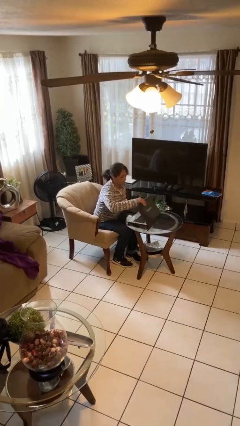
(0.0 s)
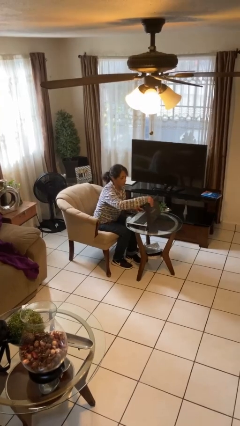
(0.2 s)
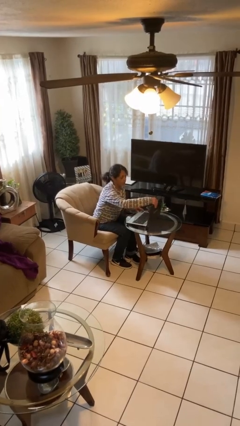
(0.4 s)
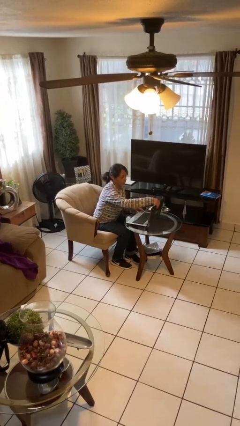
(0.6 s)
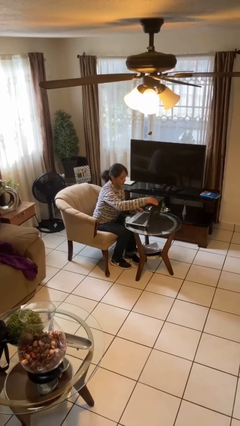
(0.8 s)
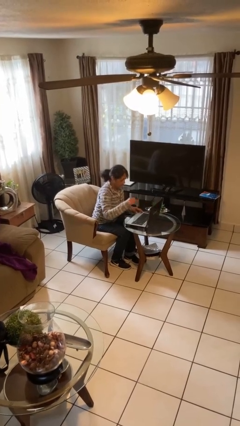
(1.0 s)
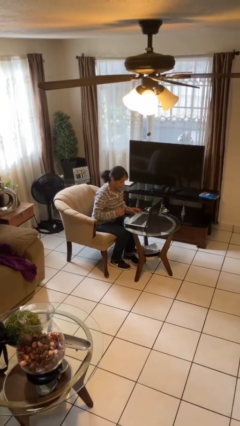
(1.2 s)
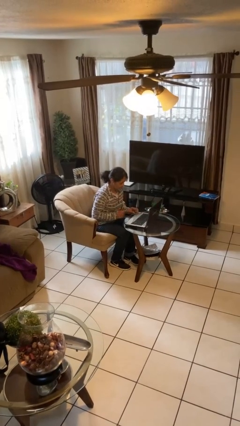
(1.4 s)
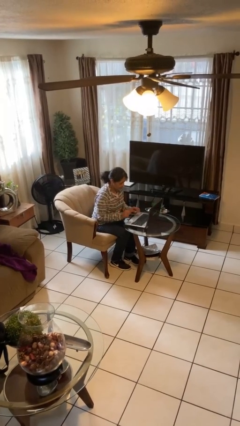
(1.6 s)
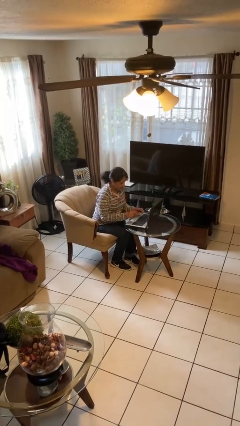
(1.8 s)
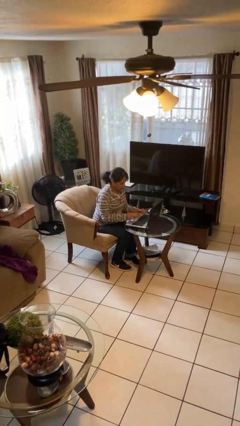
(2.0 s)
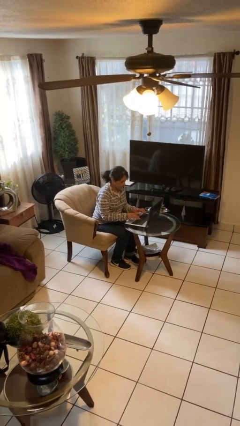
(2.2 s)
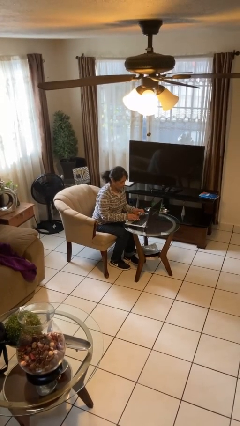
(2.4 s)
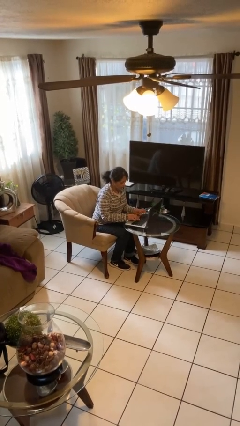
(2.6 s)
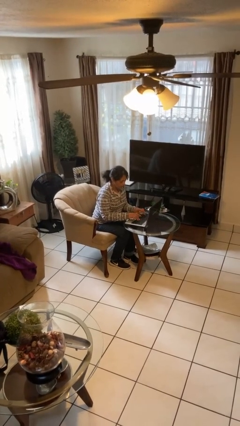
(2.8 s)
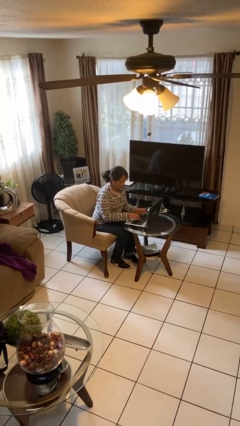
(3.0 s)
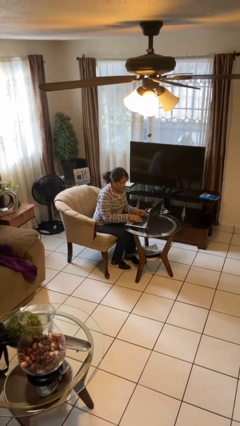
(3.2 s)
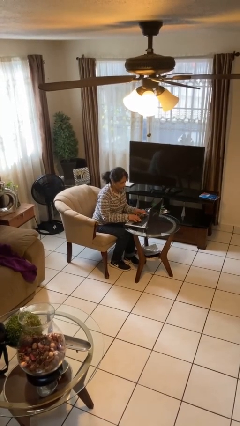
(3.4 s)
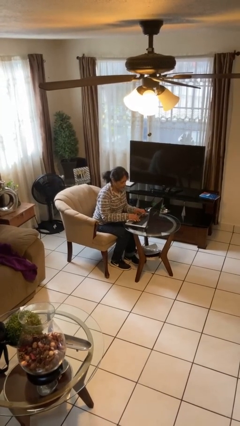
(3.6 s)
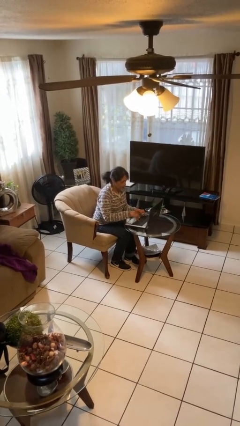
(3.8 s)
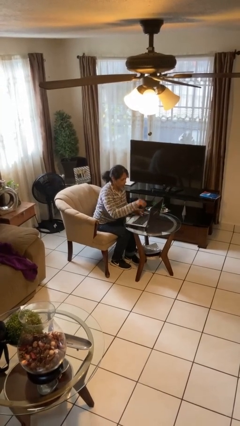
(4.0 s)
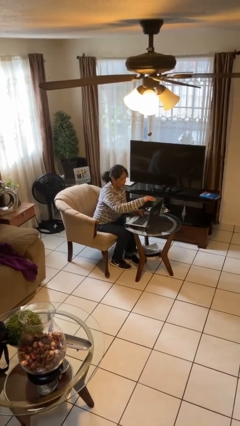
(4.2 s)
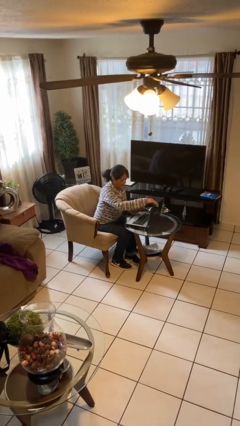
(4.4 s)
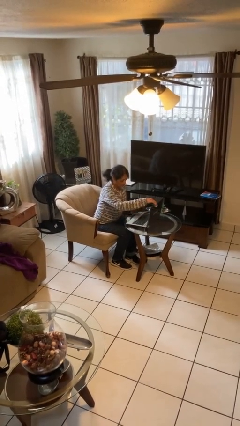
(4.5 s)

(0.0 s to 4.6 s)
person interacts with laptop

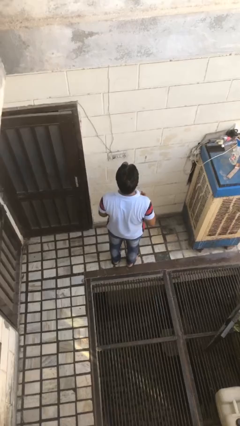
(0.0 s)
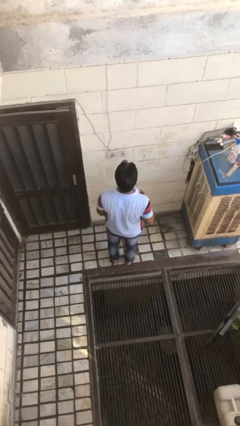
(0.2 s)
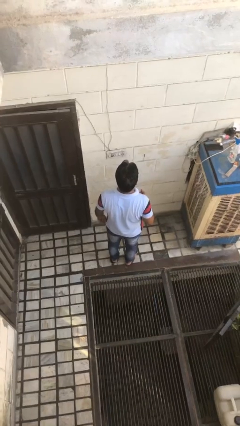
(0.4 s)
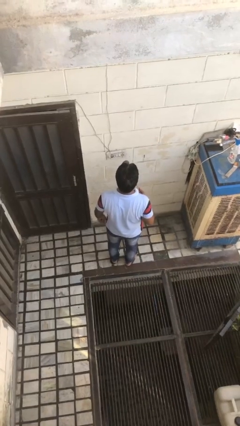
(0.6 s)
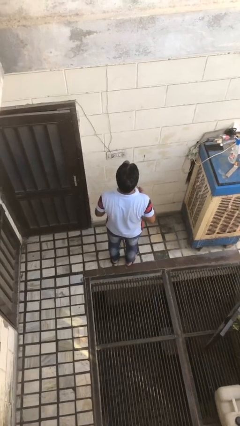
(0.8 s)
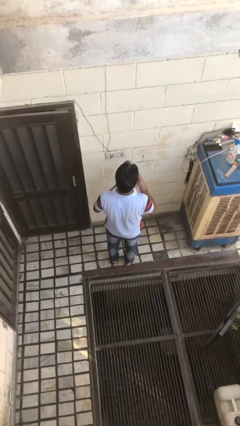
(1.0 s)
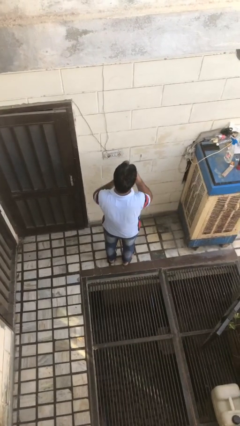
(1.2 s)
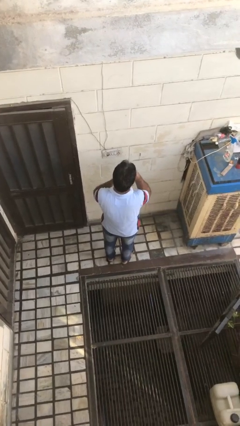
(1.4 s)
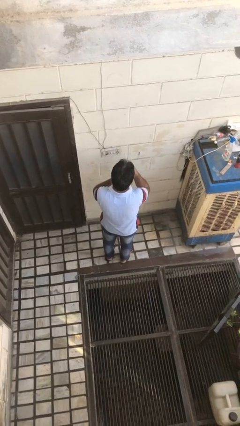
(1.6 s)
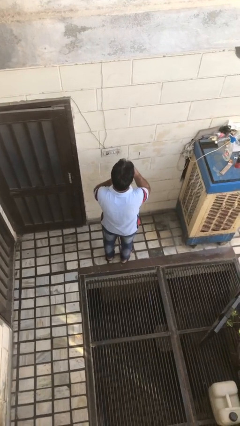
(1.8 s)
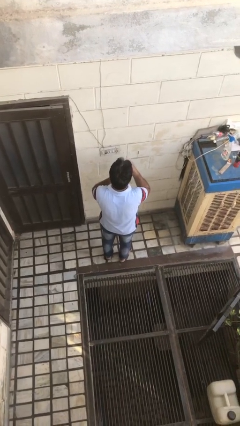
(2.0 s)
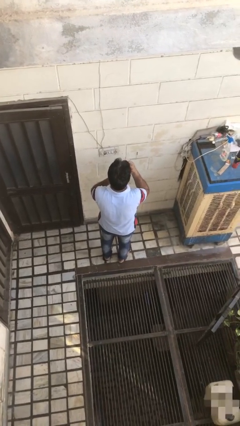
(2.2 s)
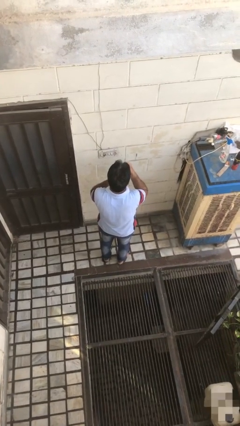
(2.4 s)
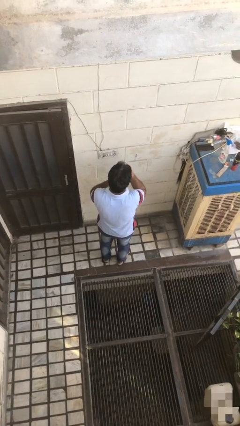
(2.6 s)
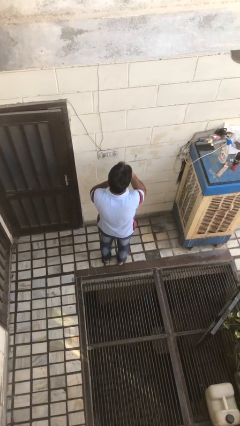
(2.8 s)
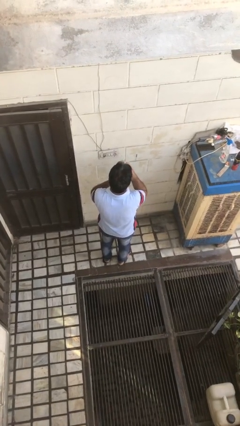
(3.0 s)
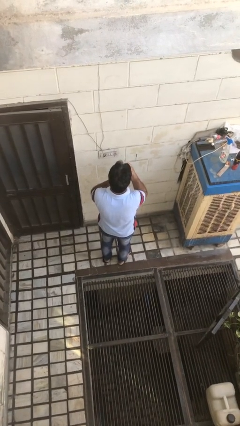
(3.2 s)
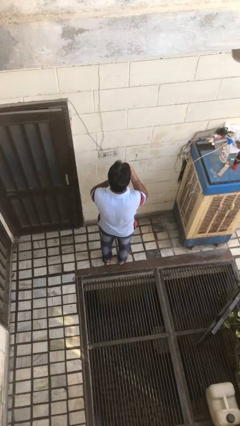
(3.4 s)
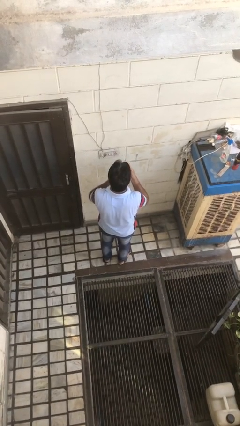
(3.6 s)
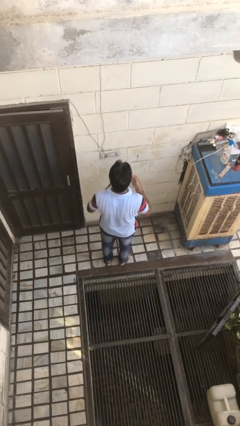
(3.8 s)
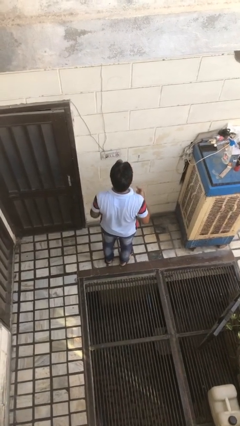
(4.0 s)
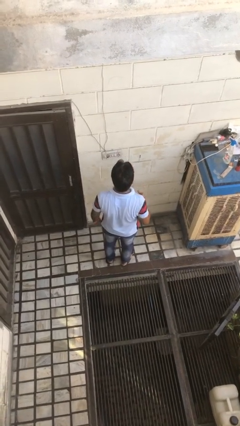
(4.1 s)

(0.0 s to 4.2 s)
person applies lip makeup

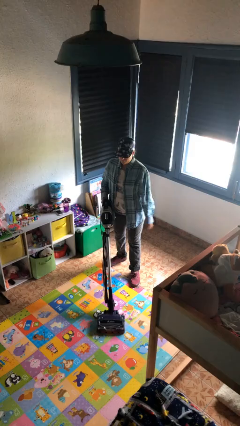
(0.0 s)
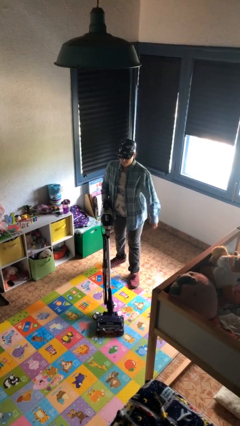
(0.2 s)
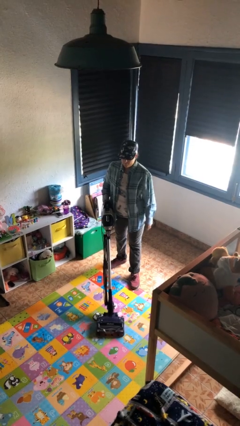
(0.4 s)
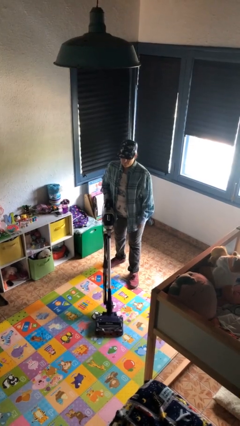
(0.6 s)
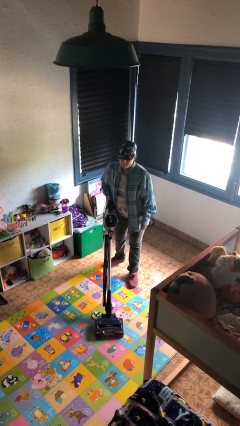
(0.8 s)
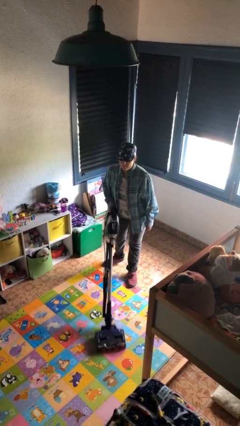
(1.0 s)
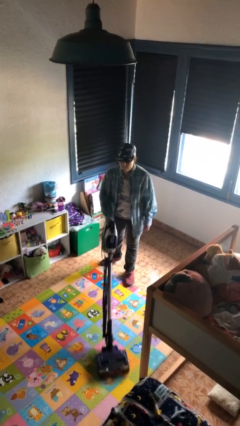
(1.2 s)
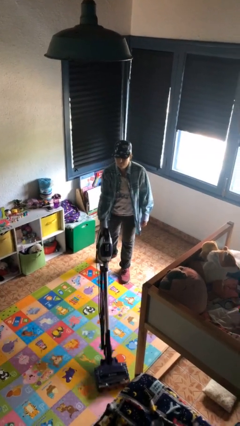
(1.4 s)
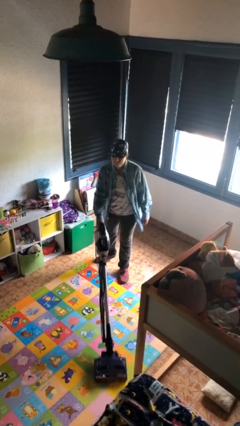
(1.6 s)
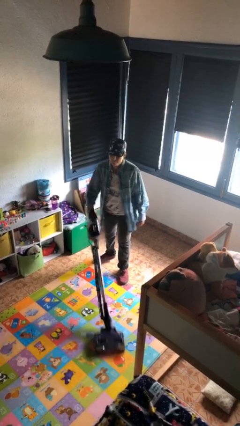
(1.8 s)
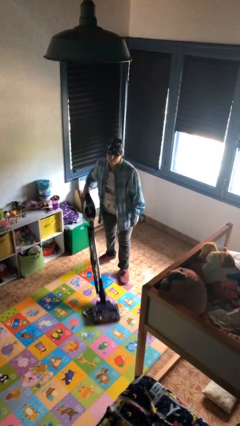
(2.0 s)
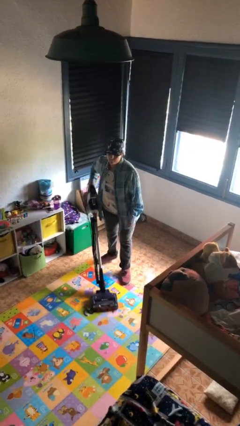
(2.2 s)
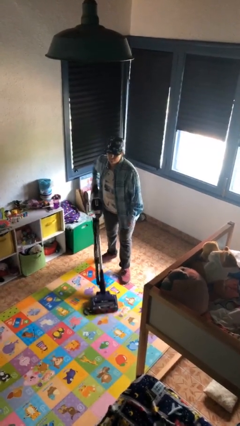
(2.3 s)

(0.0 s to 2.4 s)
person vacuums carpet

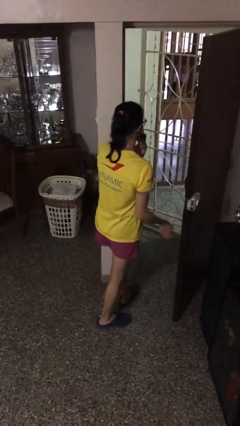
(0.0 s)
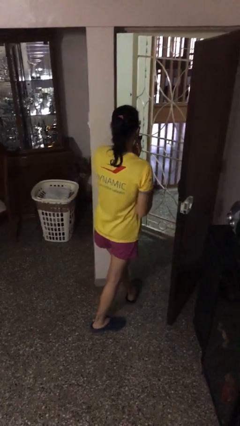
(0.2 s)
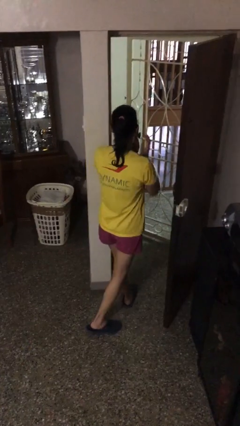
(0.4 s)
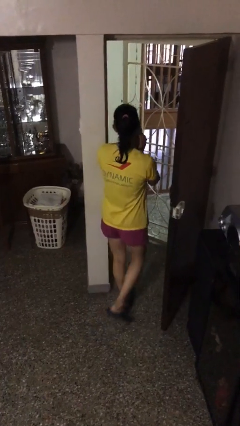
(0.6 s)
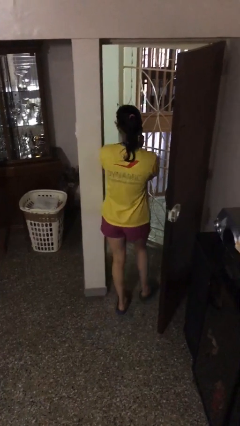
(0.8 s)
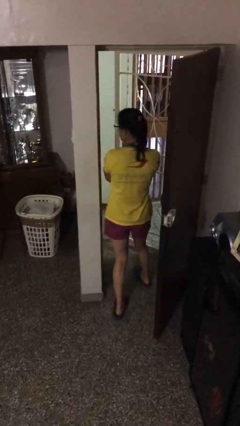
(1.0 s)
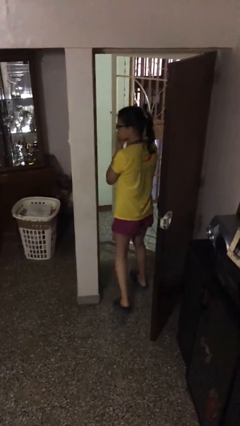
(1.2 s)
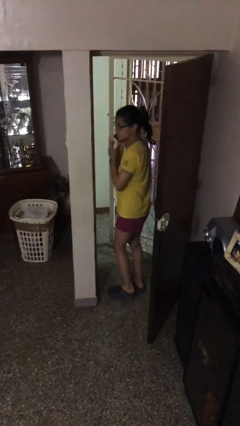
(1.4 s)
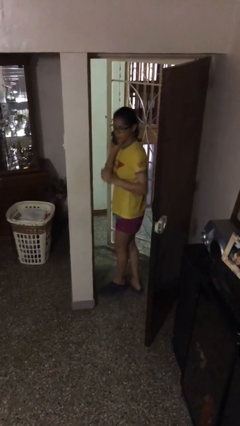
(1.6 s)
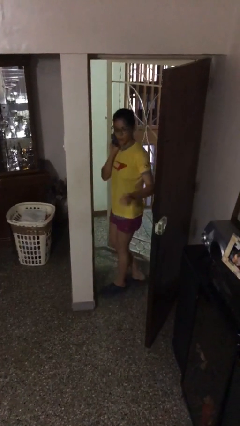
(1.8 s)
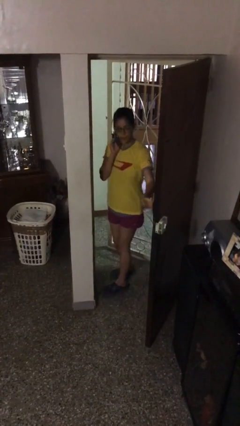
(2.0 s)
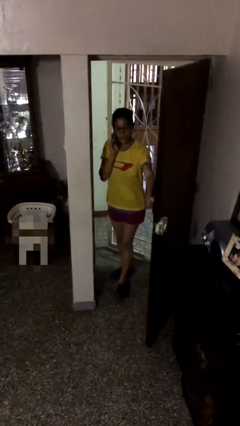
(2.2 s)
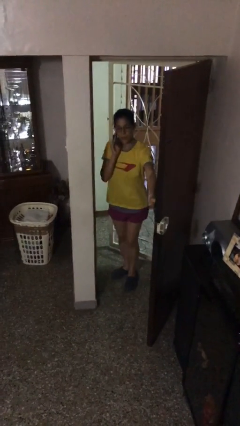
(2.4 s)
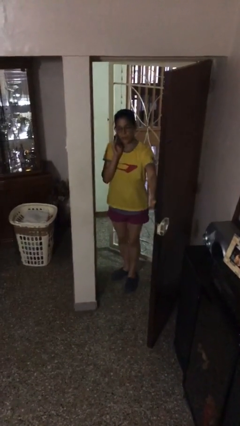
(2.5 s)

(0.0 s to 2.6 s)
person exits scene through structure

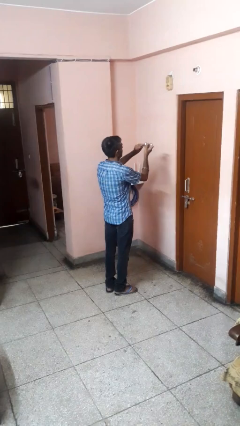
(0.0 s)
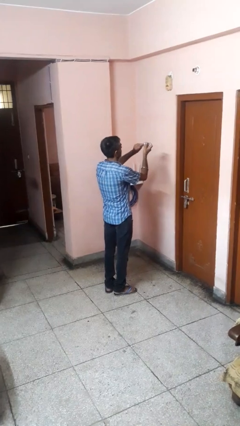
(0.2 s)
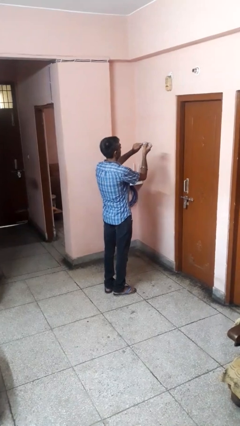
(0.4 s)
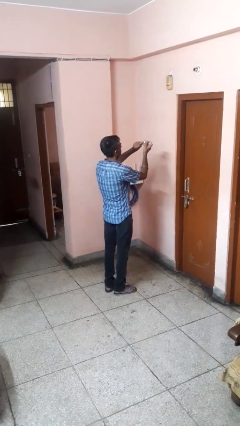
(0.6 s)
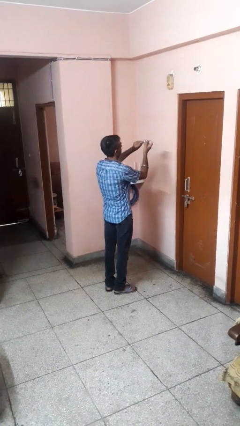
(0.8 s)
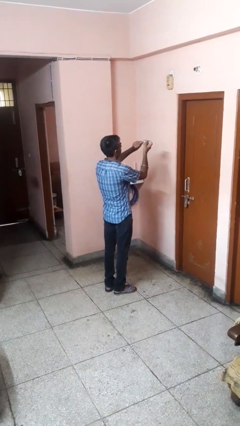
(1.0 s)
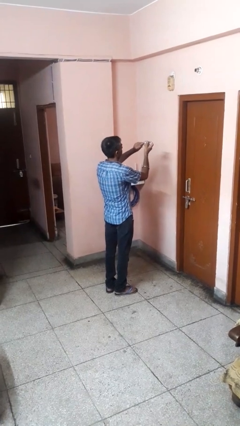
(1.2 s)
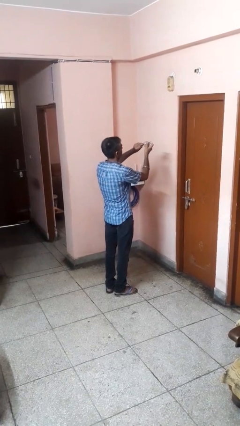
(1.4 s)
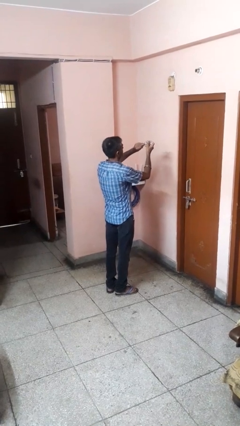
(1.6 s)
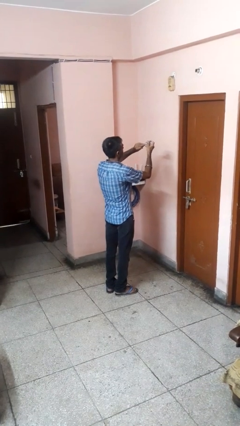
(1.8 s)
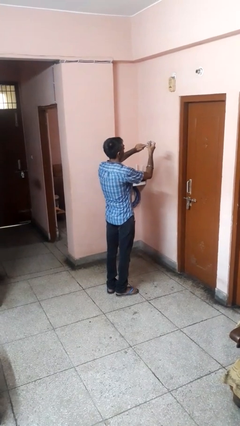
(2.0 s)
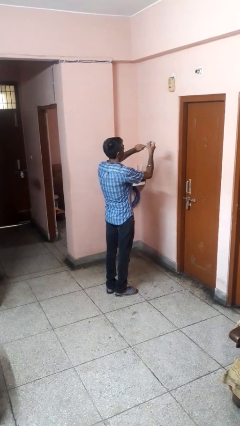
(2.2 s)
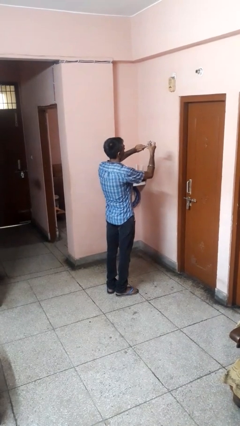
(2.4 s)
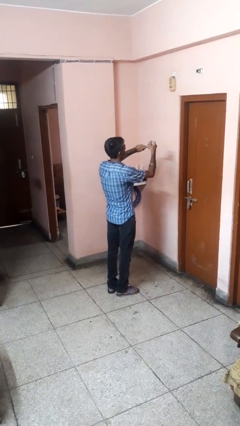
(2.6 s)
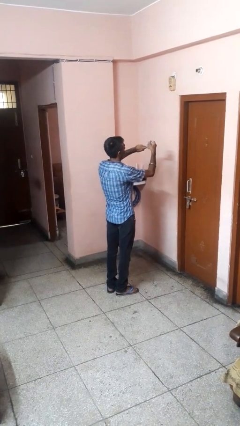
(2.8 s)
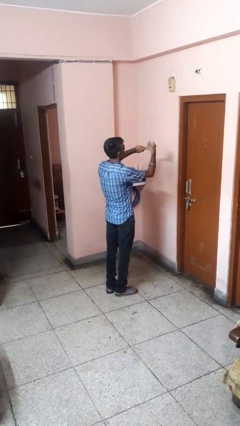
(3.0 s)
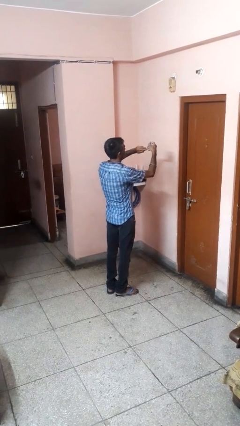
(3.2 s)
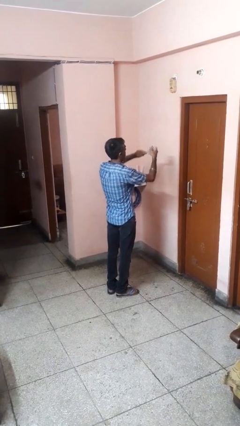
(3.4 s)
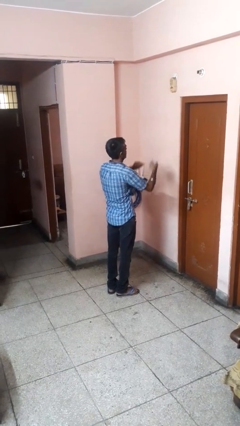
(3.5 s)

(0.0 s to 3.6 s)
person clips fingernails
